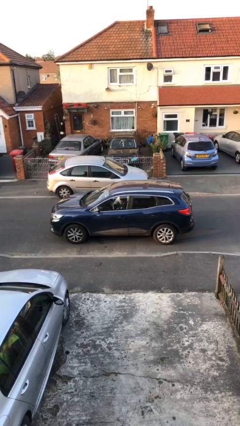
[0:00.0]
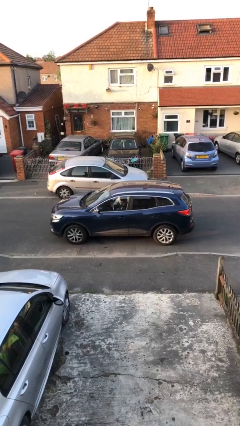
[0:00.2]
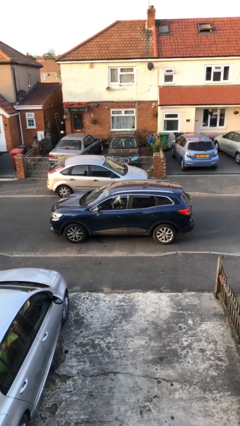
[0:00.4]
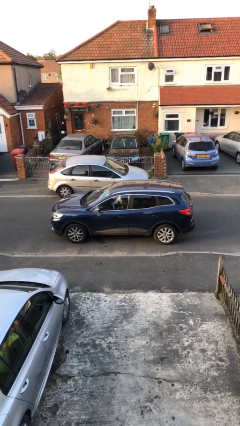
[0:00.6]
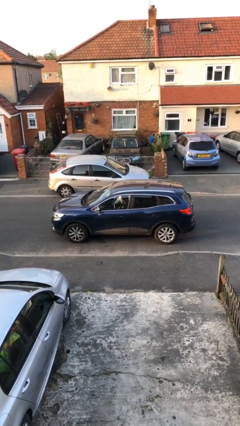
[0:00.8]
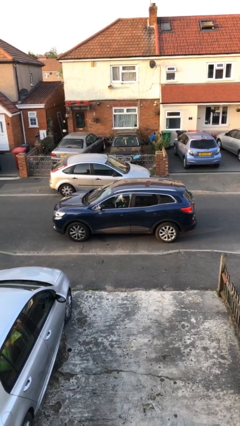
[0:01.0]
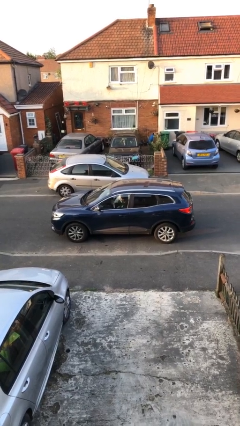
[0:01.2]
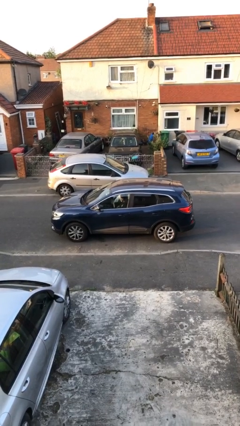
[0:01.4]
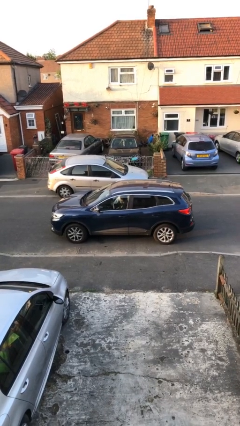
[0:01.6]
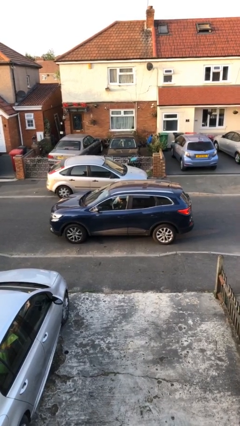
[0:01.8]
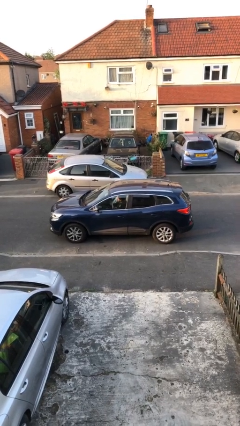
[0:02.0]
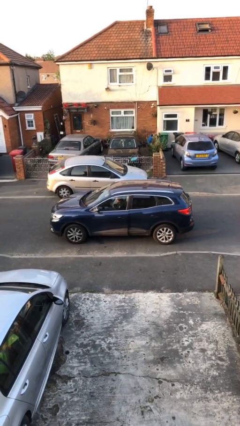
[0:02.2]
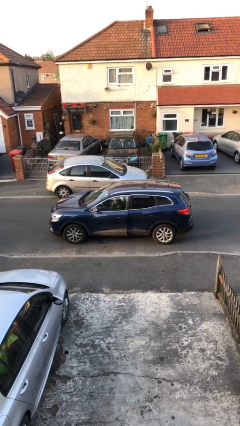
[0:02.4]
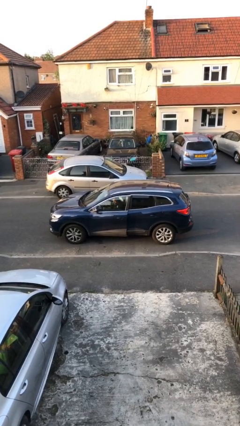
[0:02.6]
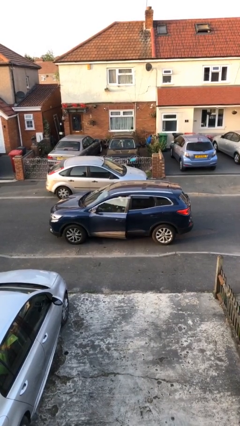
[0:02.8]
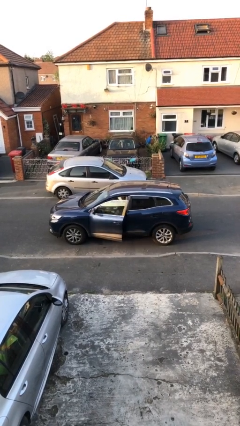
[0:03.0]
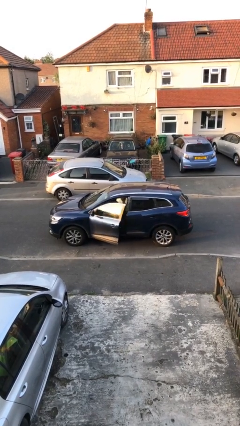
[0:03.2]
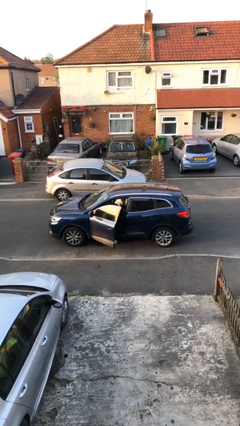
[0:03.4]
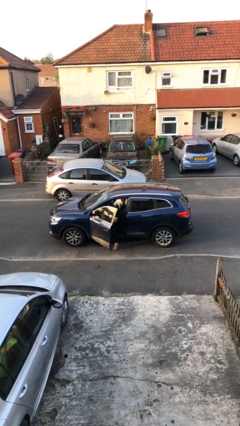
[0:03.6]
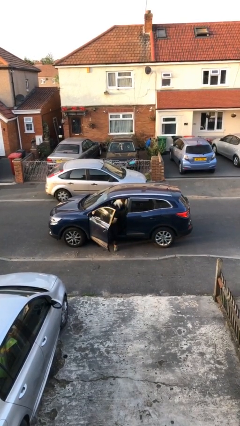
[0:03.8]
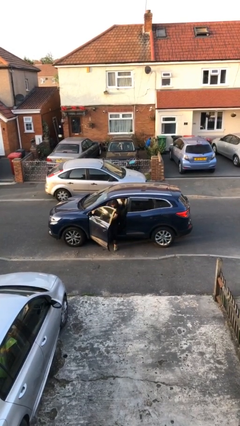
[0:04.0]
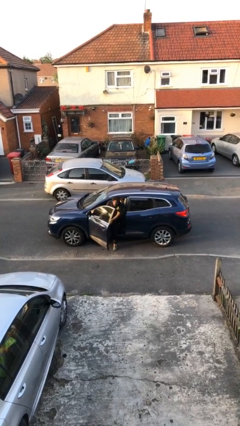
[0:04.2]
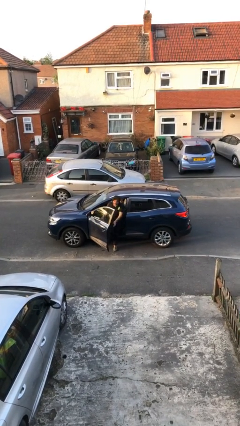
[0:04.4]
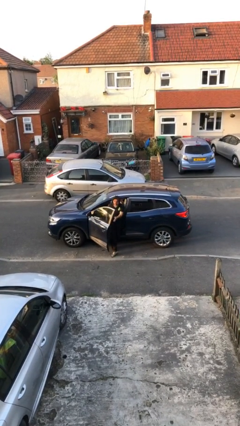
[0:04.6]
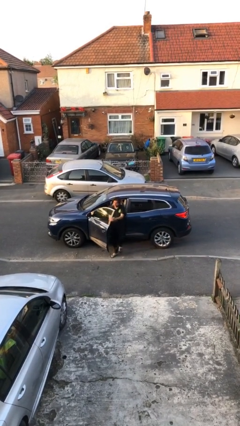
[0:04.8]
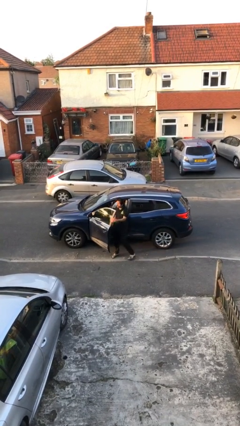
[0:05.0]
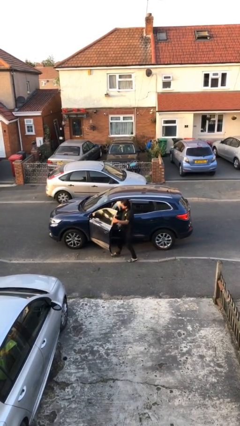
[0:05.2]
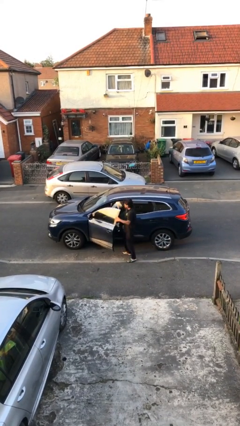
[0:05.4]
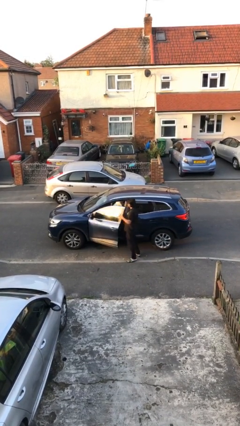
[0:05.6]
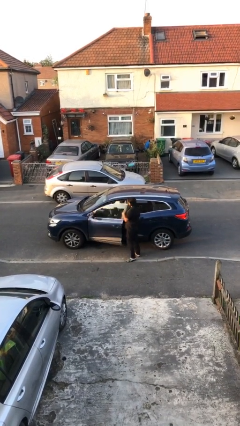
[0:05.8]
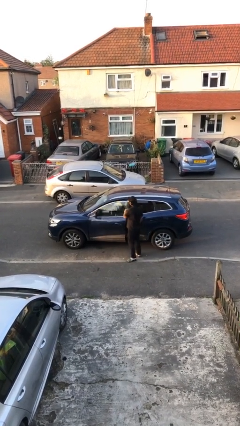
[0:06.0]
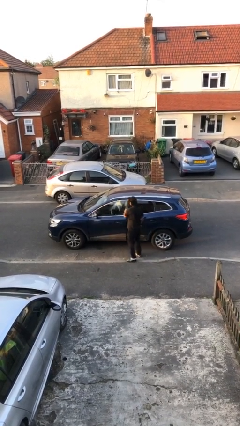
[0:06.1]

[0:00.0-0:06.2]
car drops off person

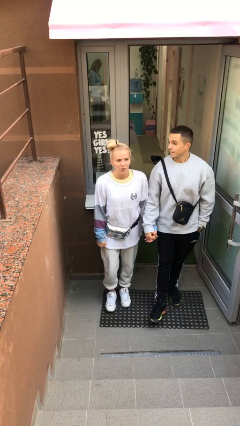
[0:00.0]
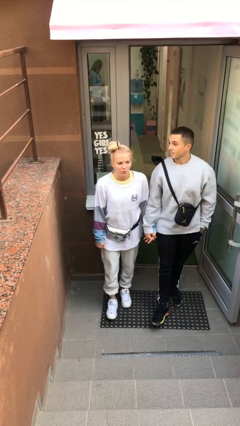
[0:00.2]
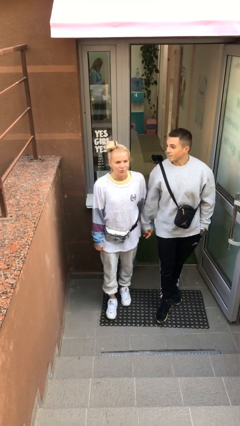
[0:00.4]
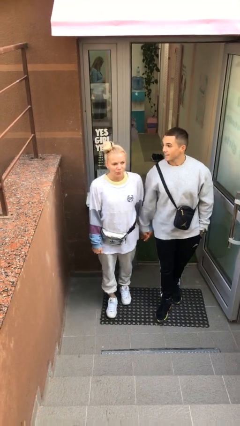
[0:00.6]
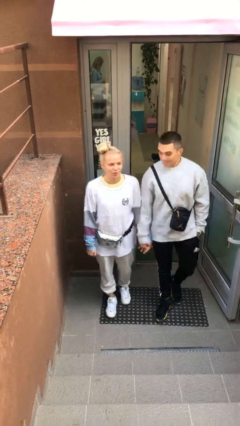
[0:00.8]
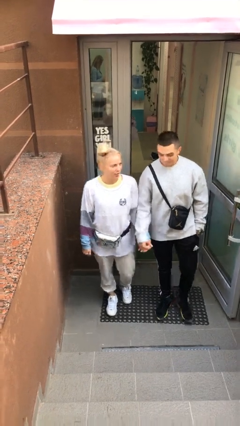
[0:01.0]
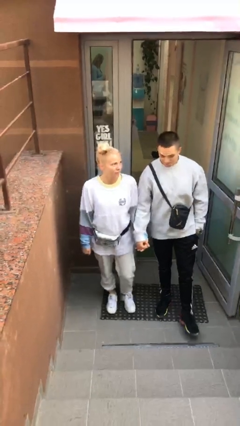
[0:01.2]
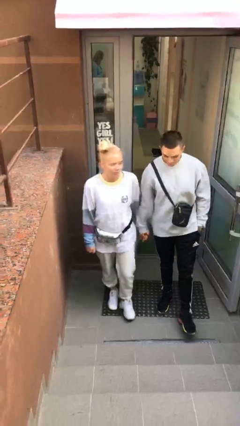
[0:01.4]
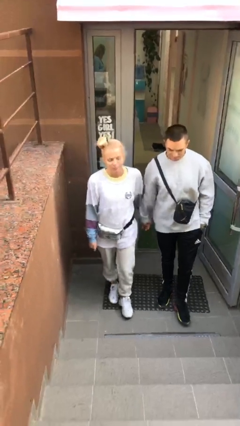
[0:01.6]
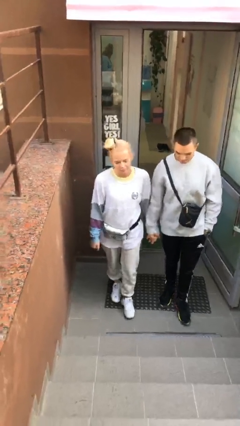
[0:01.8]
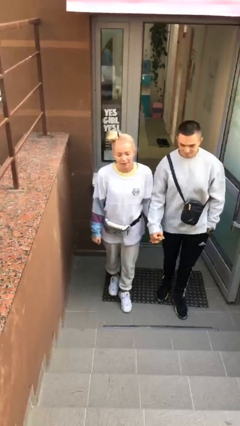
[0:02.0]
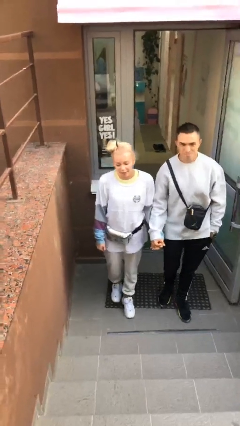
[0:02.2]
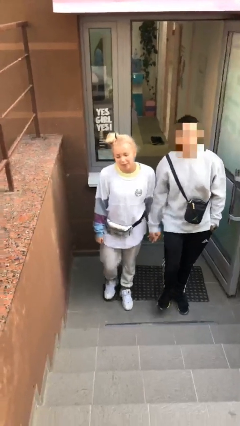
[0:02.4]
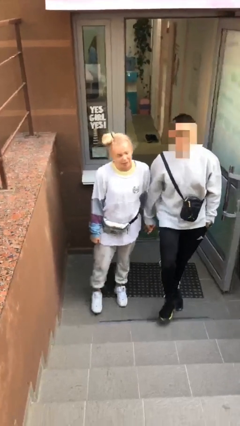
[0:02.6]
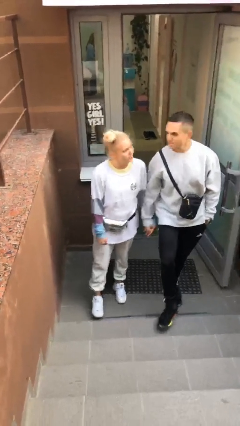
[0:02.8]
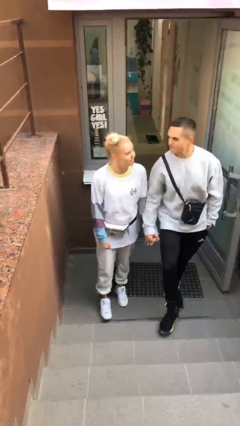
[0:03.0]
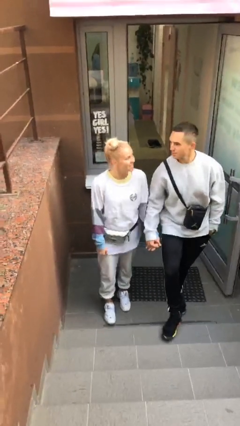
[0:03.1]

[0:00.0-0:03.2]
person talks to person

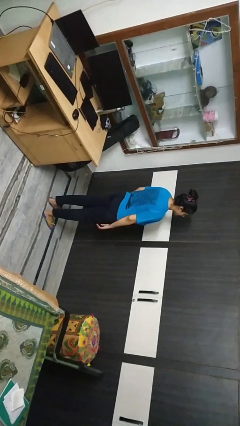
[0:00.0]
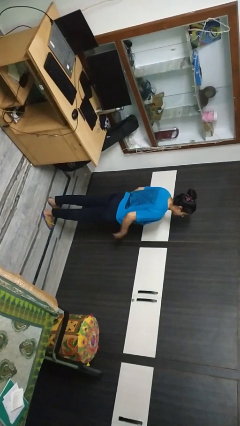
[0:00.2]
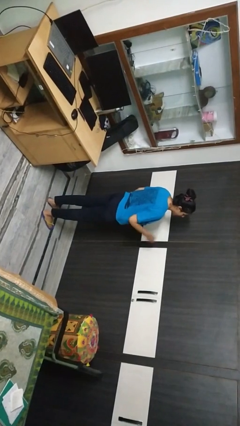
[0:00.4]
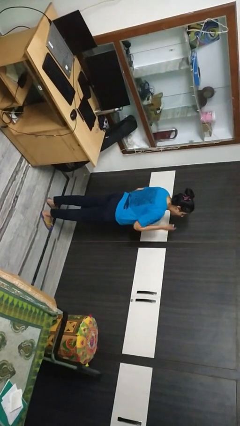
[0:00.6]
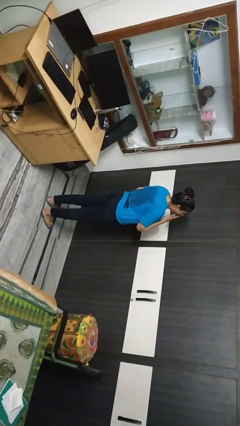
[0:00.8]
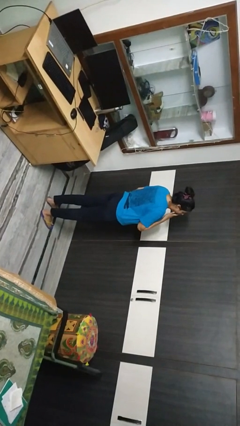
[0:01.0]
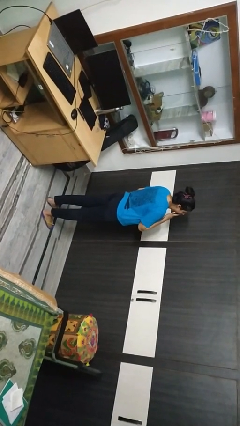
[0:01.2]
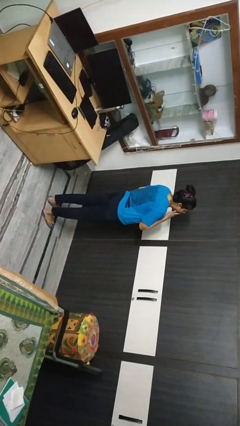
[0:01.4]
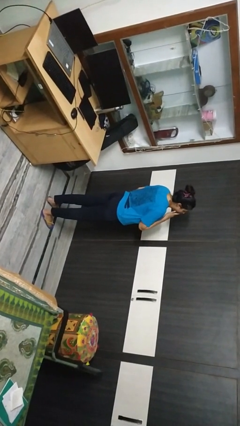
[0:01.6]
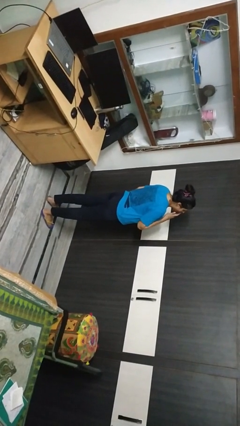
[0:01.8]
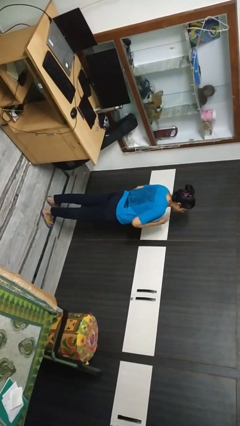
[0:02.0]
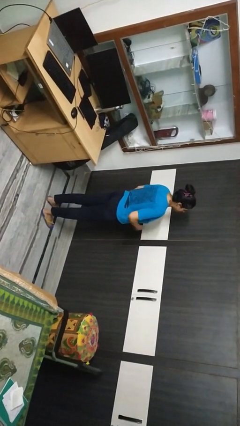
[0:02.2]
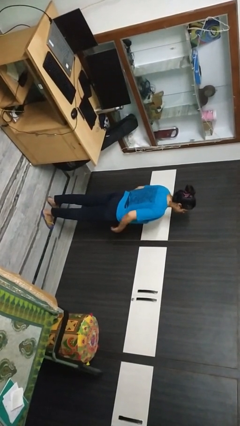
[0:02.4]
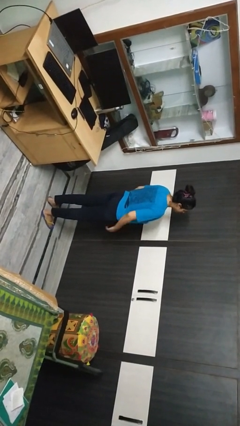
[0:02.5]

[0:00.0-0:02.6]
person yawns

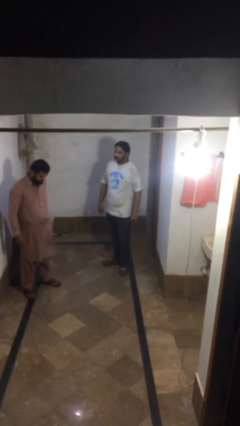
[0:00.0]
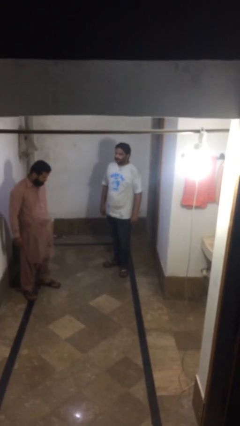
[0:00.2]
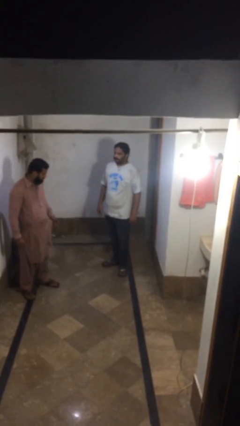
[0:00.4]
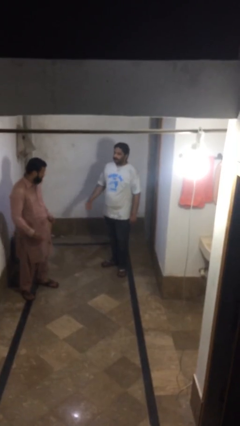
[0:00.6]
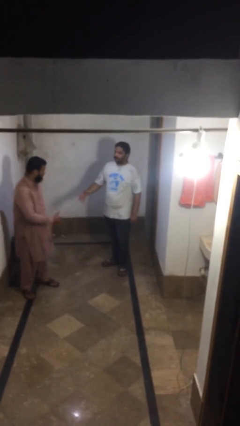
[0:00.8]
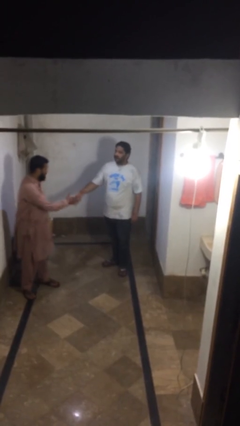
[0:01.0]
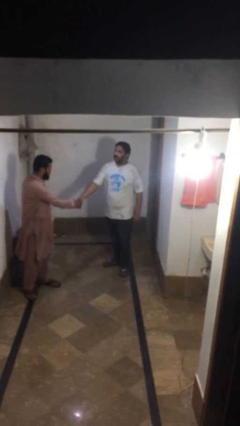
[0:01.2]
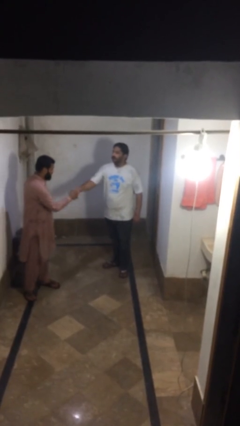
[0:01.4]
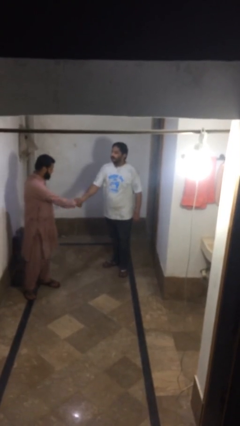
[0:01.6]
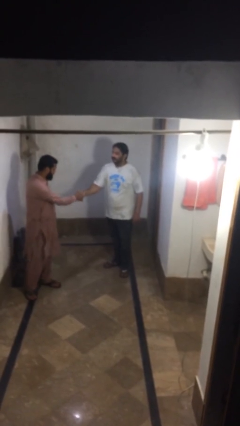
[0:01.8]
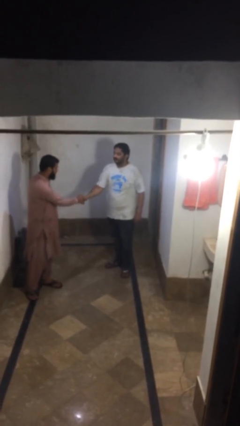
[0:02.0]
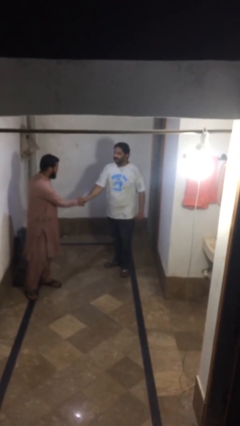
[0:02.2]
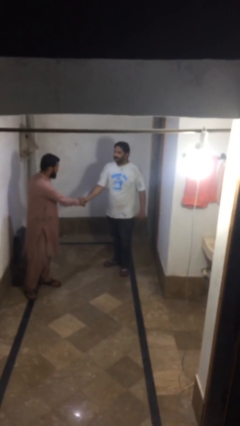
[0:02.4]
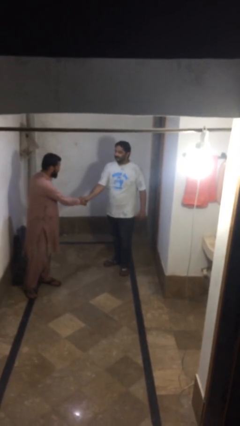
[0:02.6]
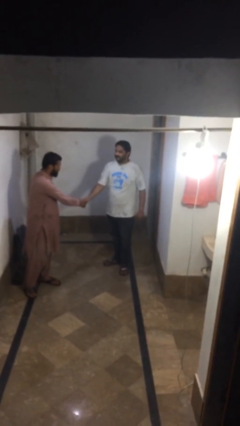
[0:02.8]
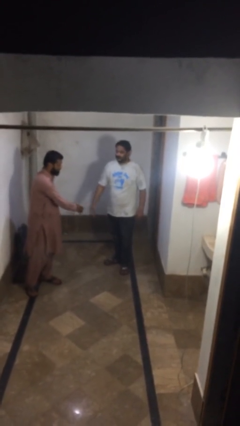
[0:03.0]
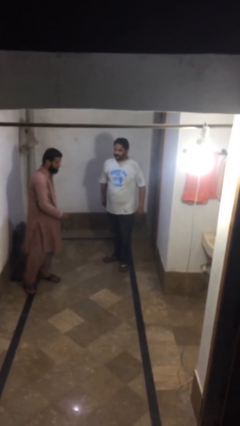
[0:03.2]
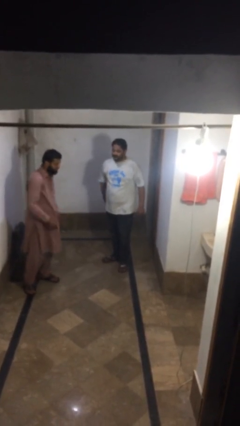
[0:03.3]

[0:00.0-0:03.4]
person shakes hand

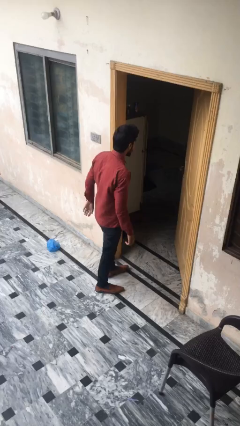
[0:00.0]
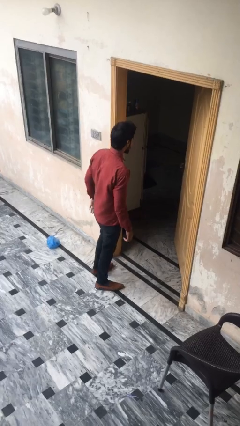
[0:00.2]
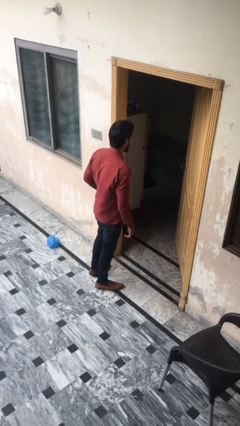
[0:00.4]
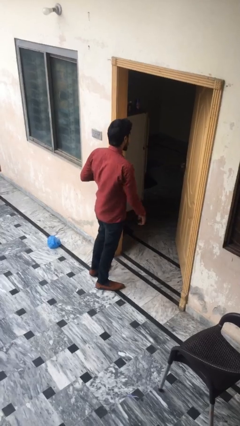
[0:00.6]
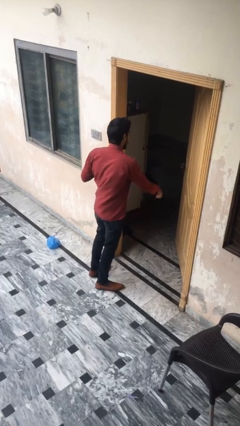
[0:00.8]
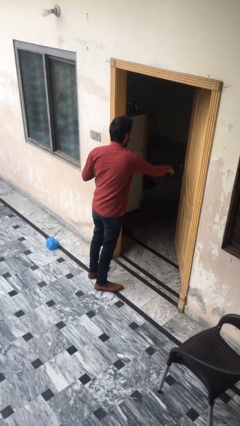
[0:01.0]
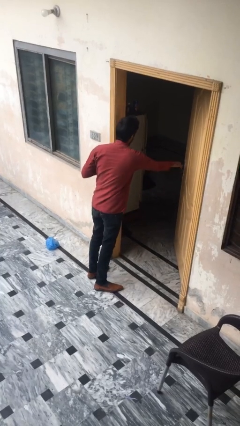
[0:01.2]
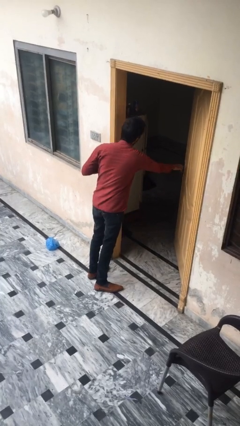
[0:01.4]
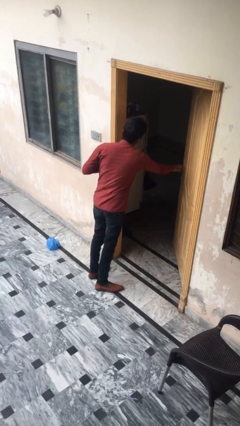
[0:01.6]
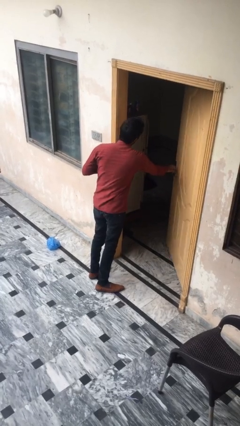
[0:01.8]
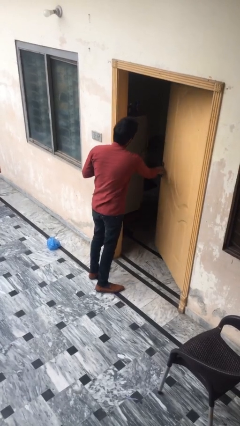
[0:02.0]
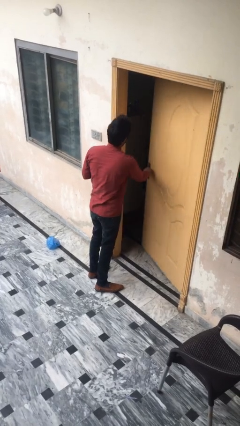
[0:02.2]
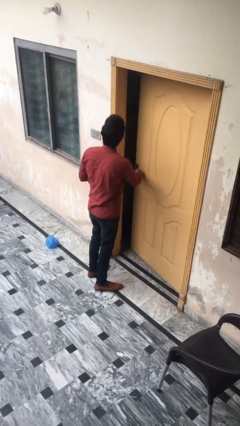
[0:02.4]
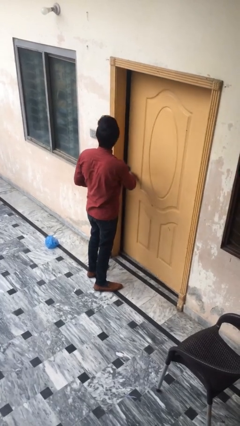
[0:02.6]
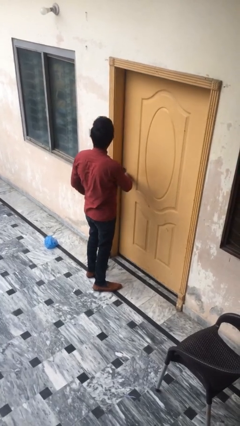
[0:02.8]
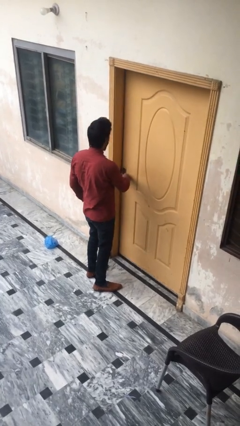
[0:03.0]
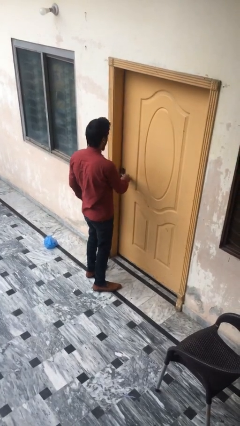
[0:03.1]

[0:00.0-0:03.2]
person closes facility door
